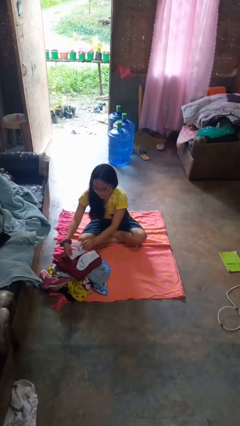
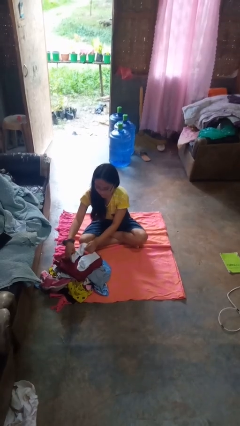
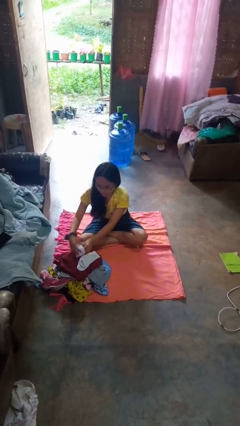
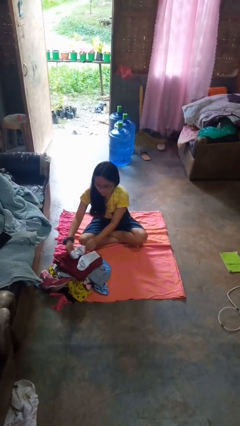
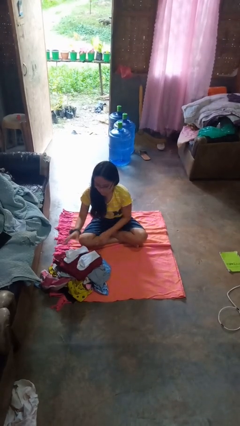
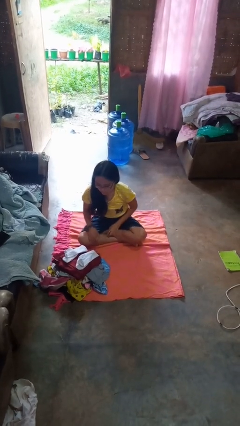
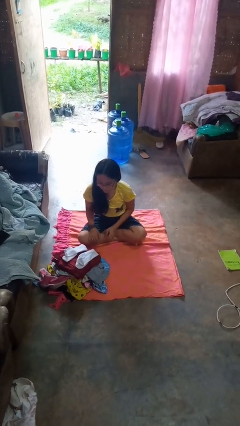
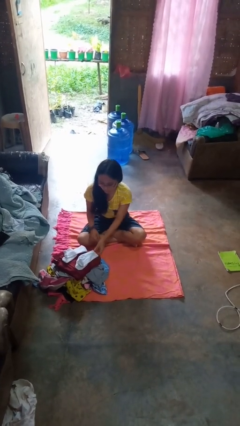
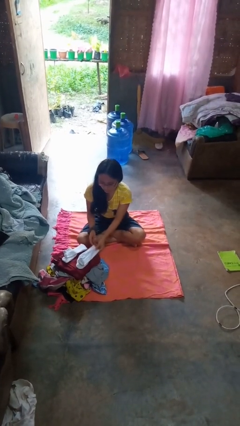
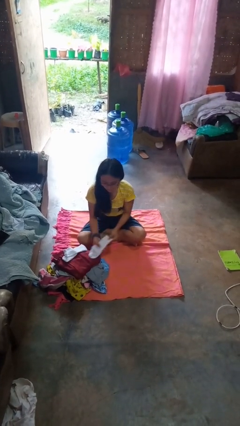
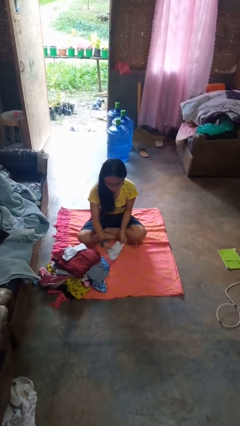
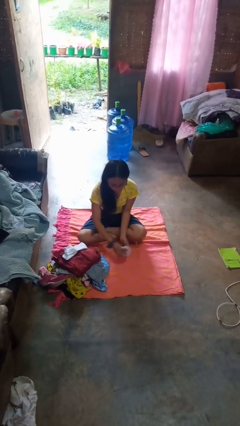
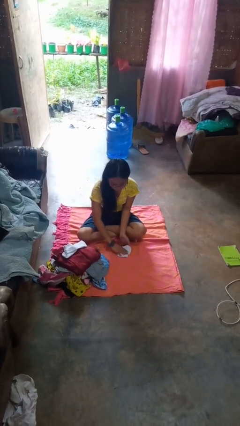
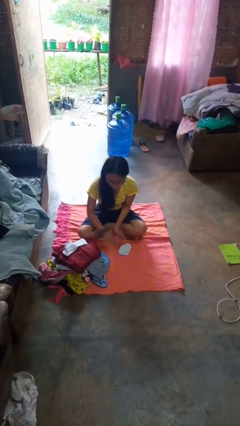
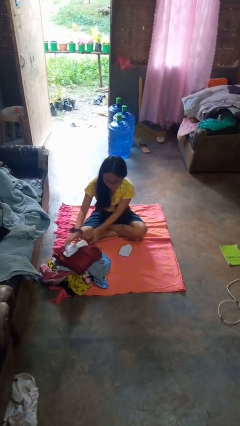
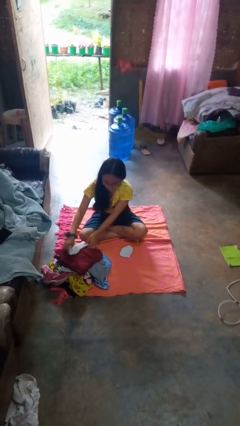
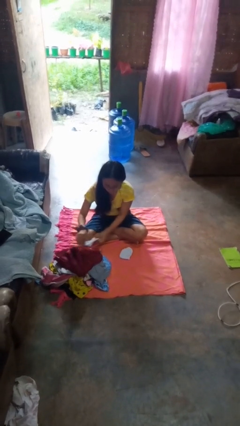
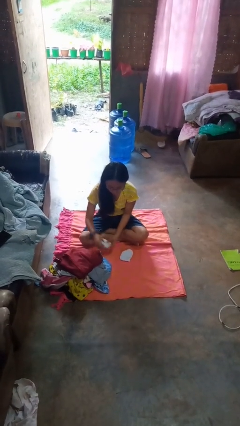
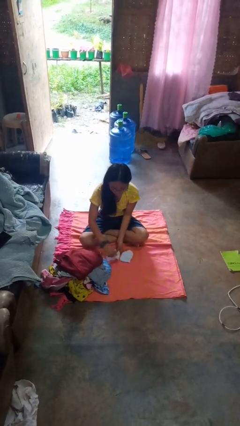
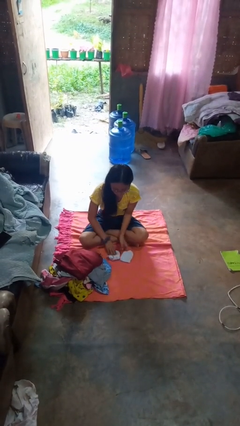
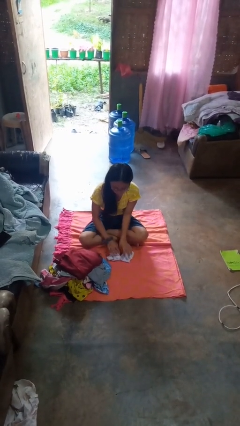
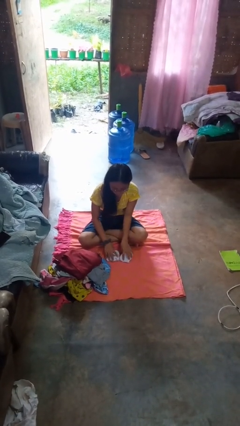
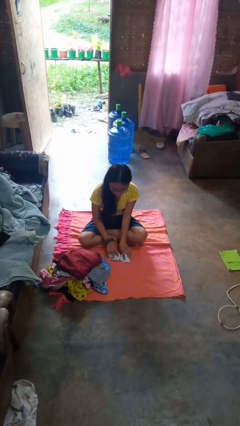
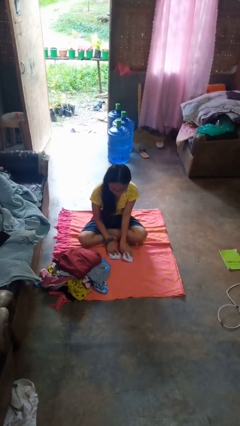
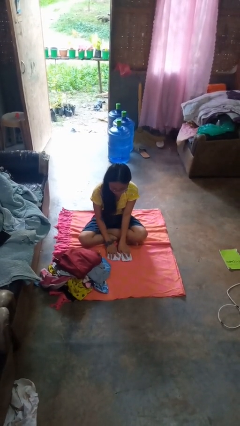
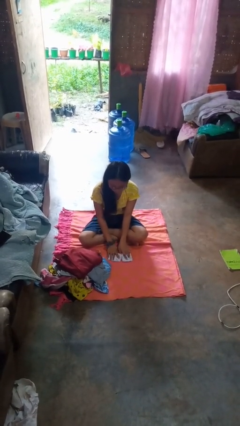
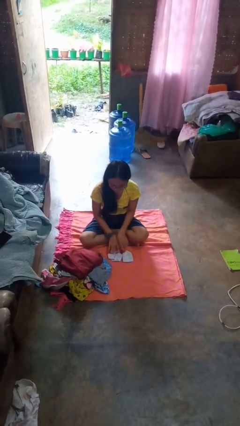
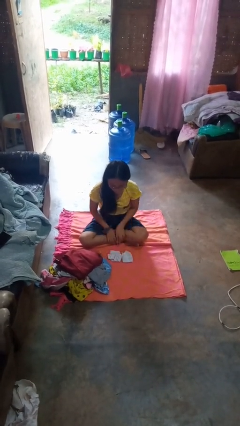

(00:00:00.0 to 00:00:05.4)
person folds socks

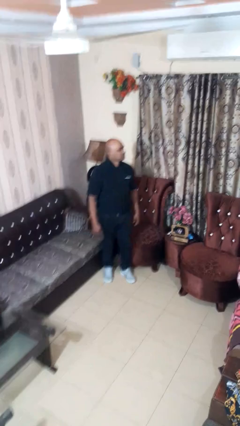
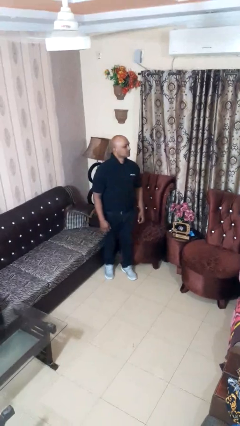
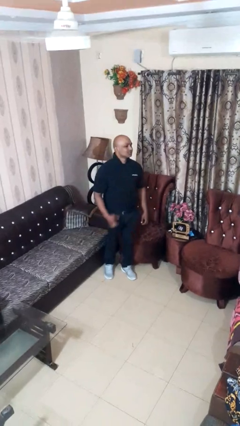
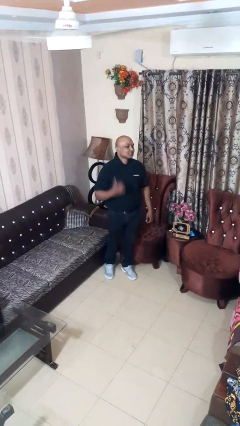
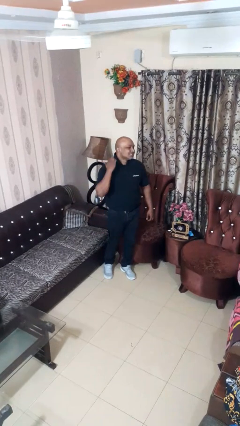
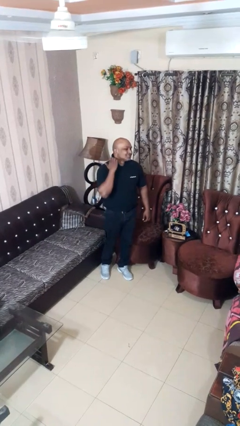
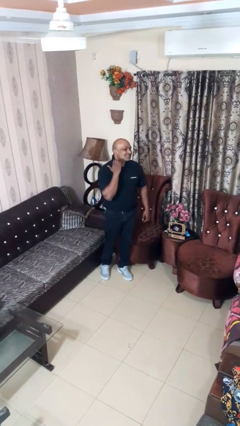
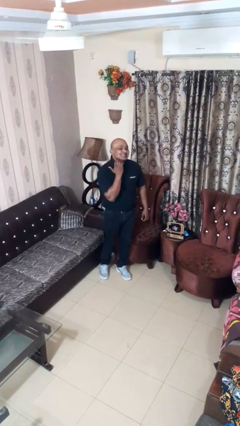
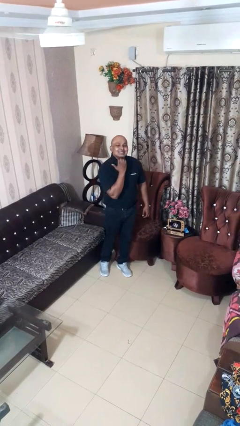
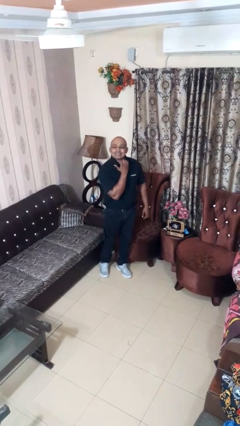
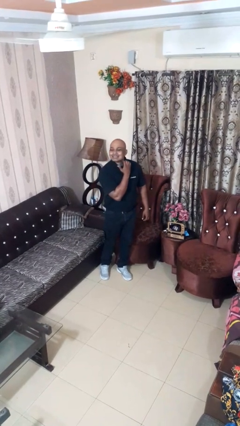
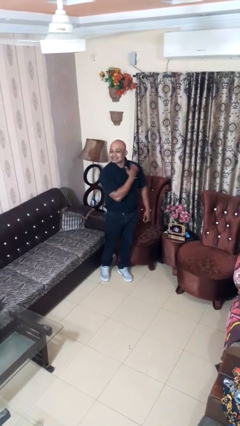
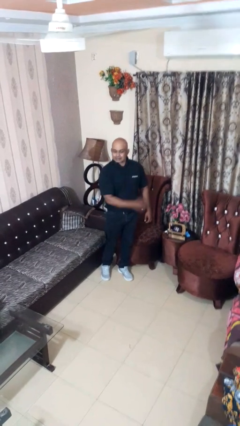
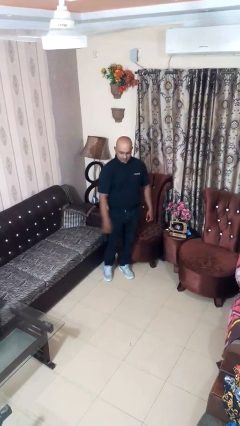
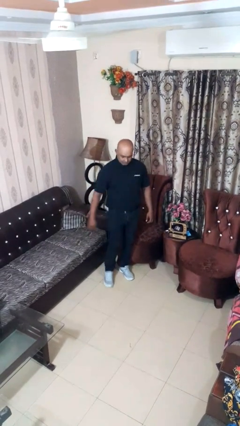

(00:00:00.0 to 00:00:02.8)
person gestures cut

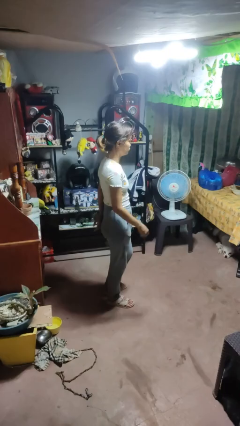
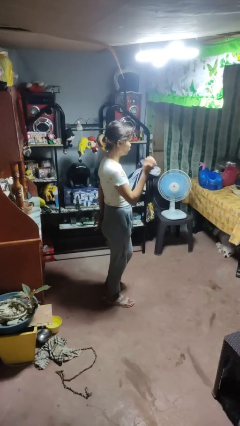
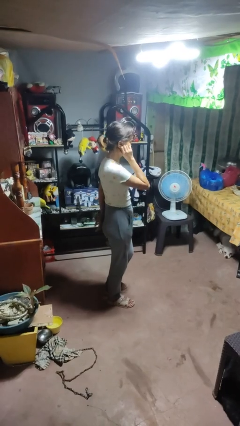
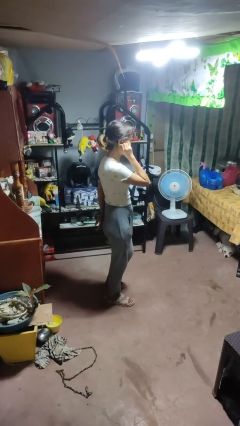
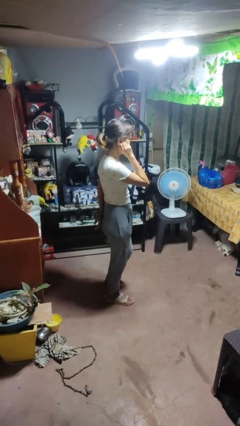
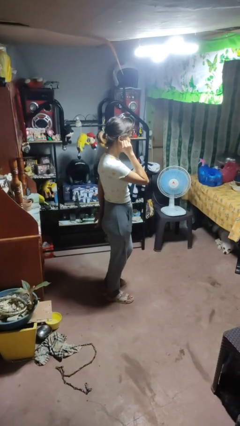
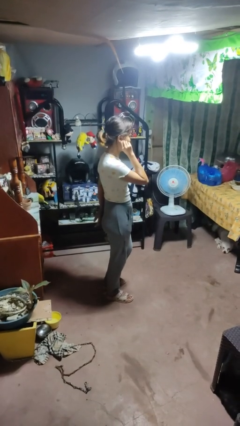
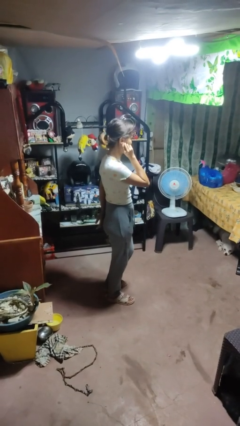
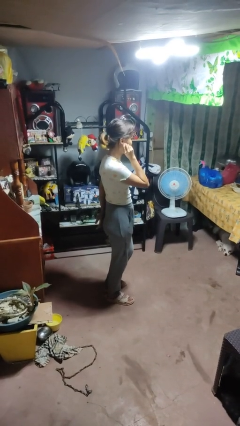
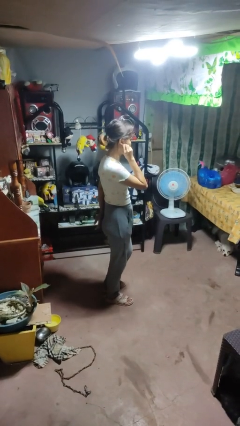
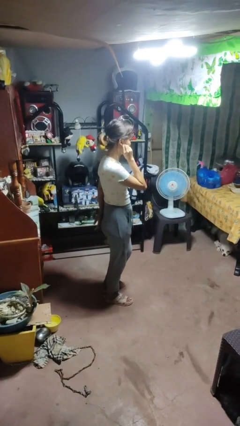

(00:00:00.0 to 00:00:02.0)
person touches earlobe

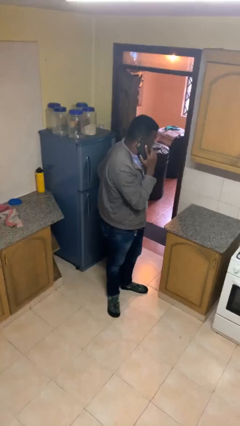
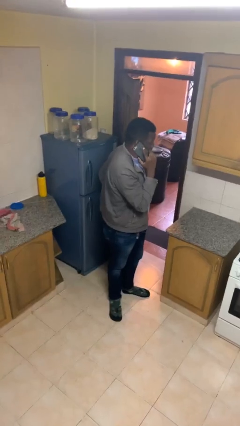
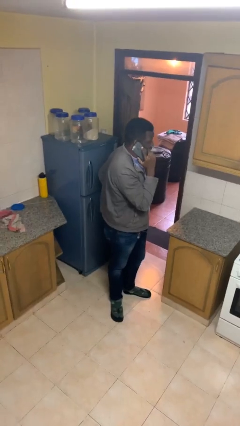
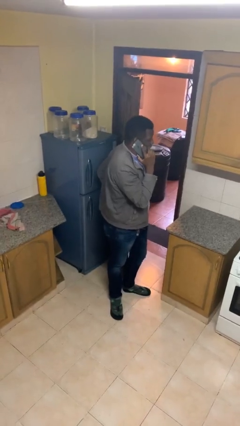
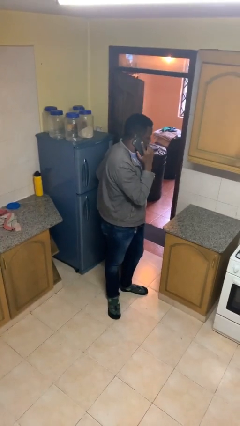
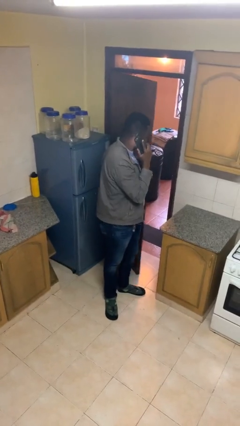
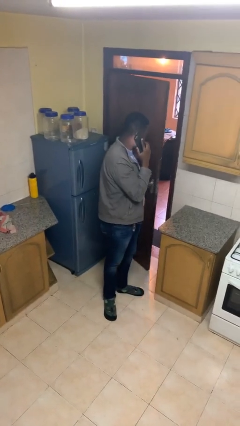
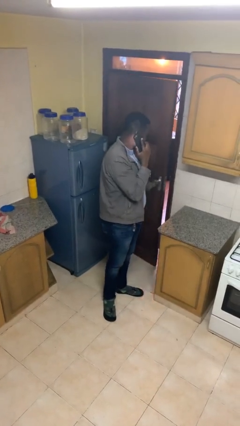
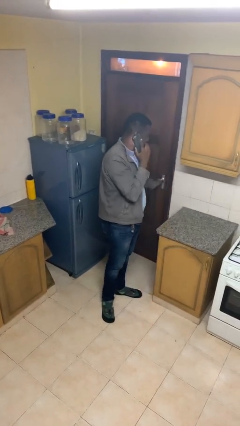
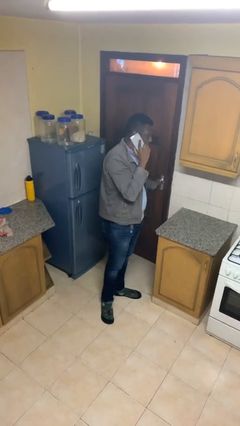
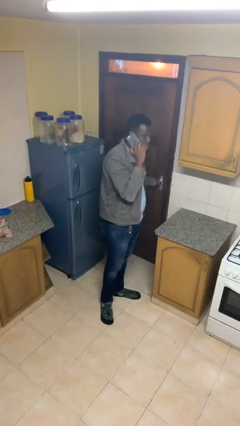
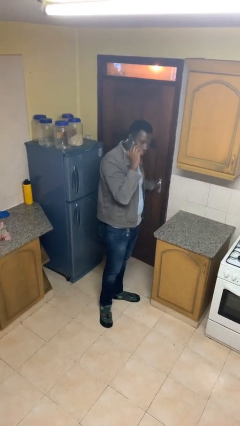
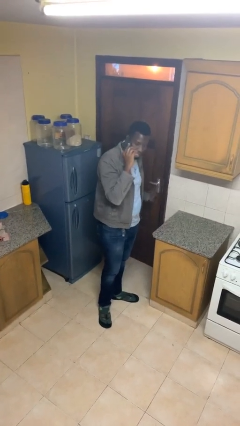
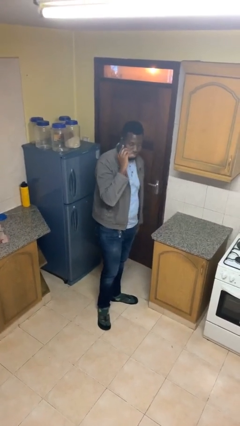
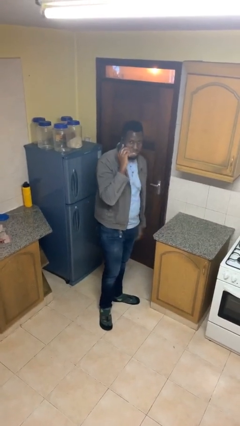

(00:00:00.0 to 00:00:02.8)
person closes facility door

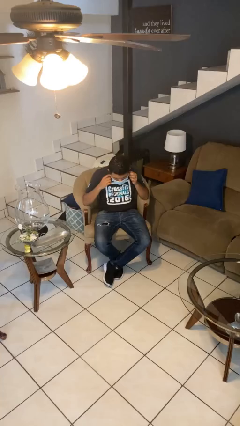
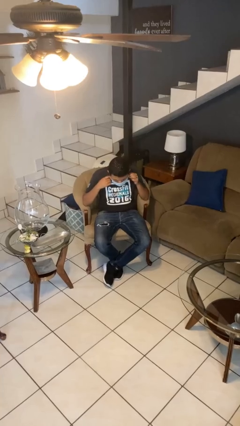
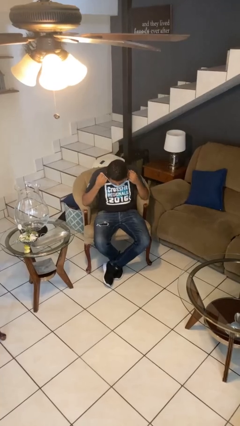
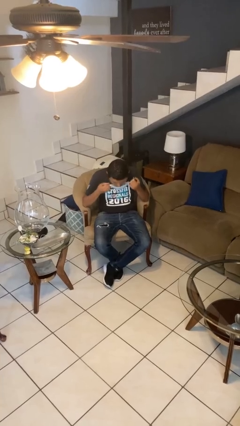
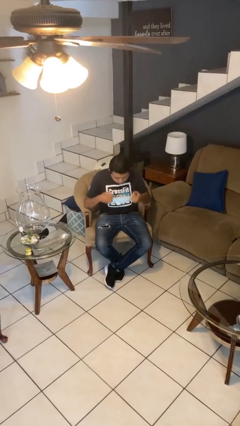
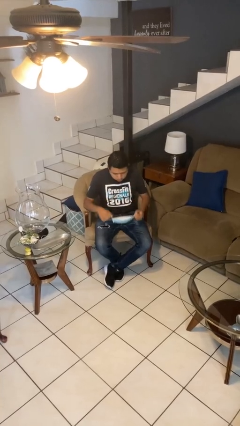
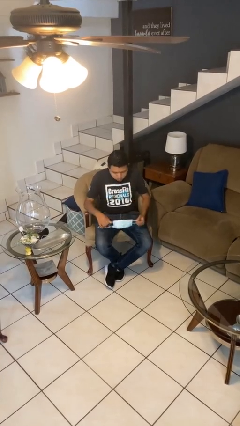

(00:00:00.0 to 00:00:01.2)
person takes off facemask

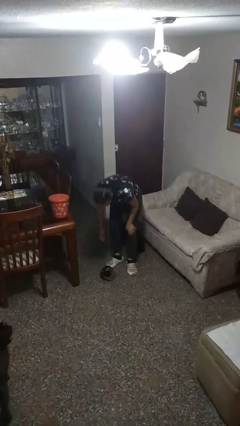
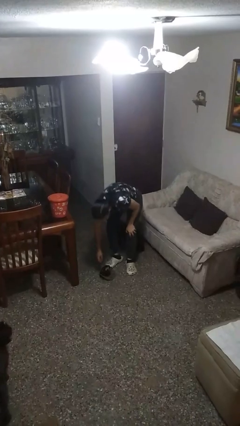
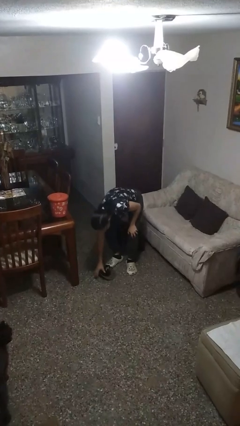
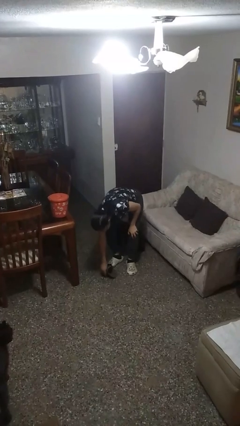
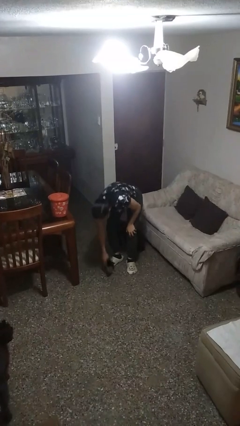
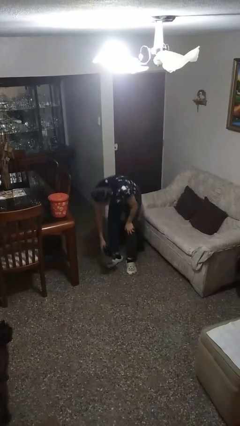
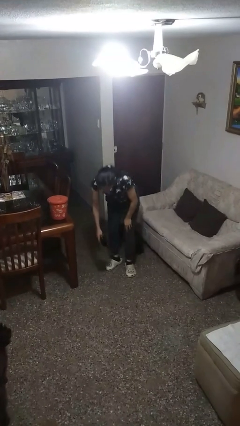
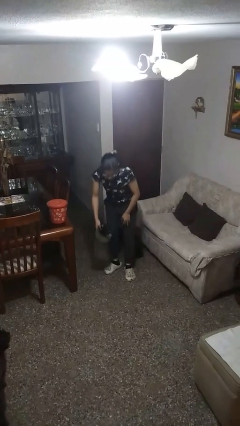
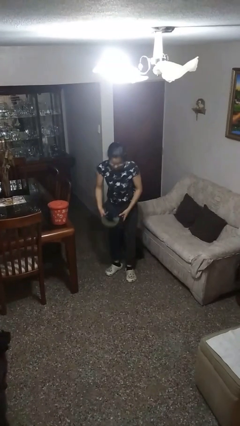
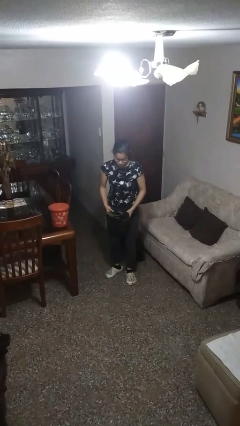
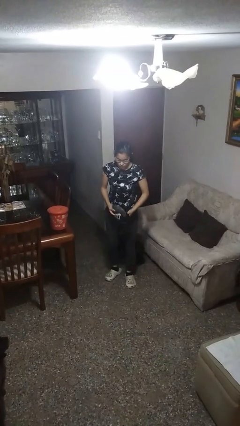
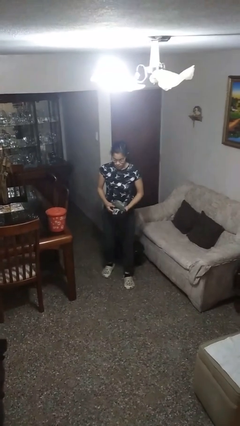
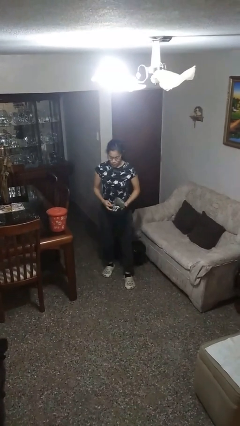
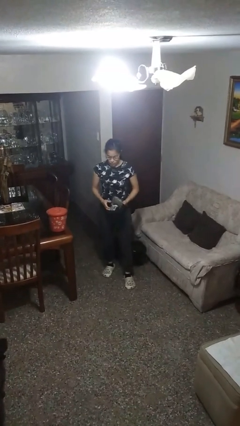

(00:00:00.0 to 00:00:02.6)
person picks up object from floor

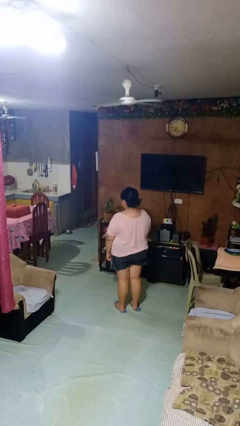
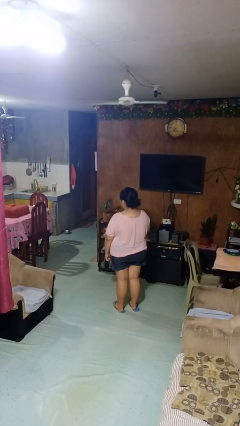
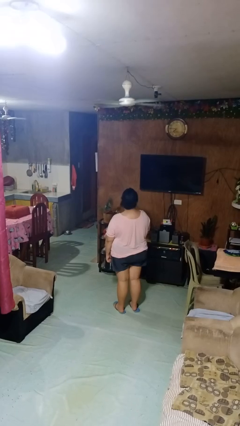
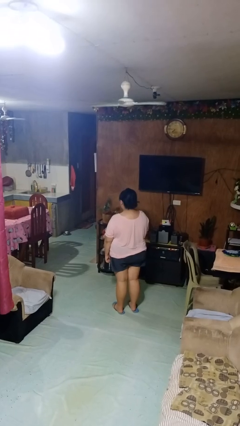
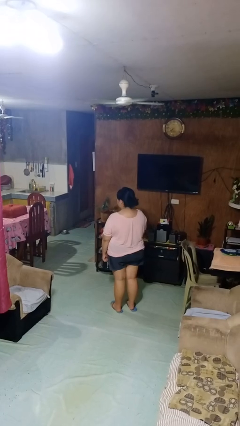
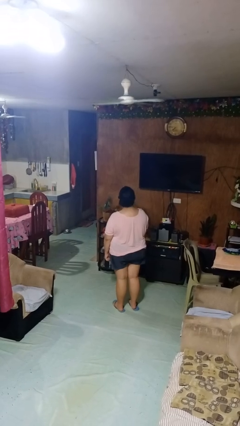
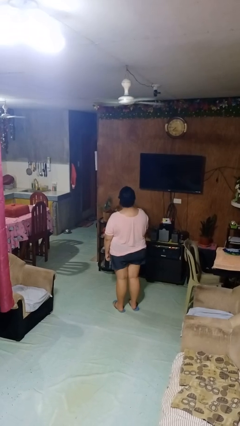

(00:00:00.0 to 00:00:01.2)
person shakes head
